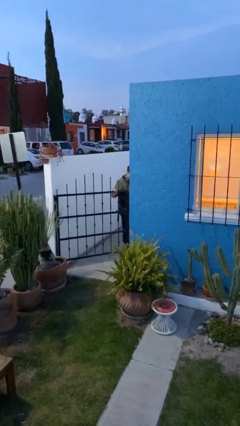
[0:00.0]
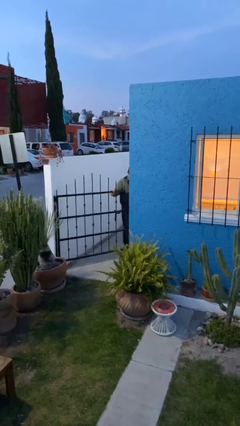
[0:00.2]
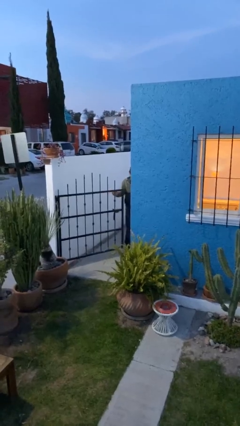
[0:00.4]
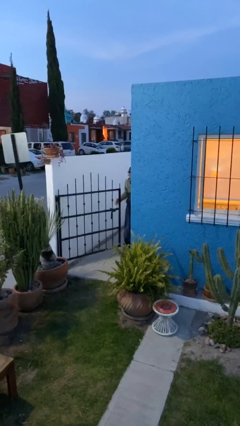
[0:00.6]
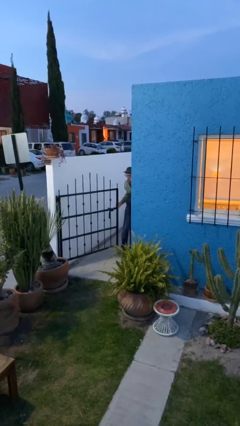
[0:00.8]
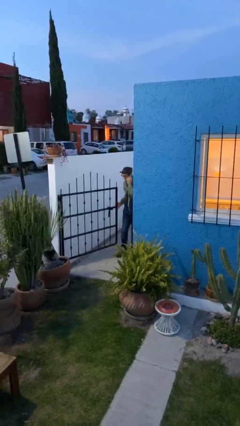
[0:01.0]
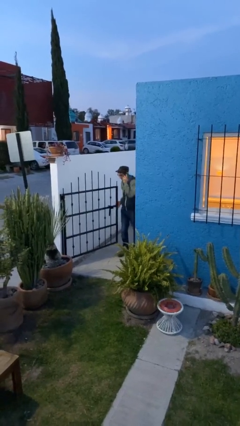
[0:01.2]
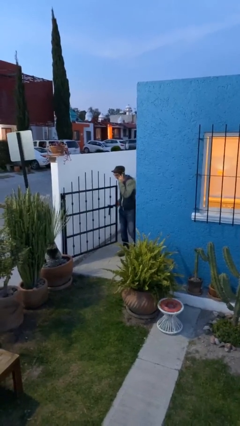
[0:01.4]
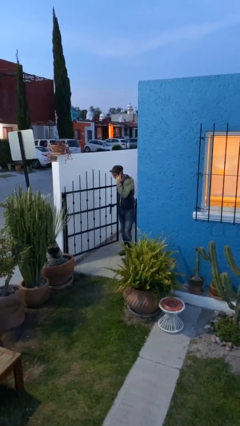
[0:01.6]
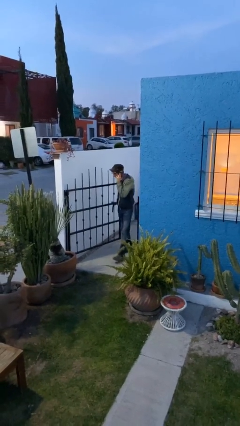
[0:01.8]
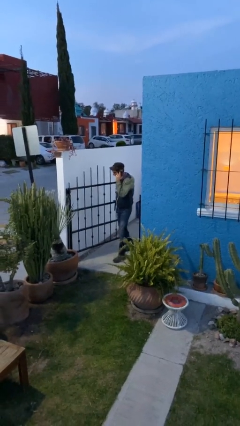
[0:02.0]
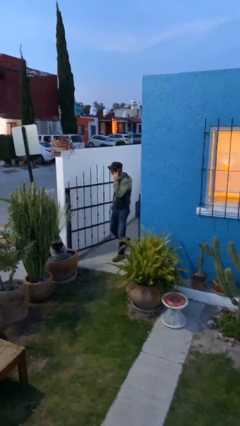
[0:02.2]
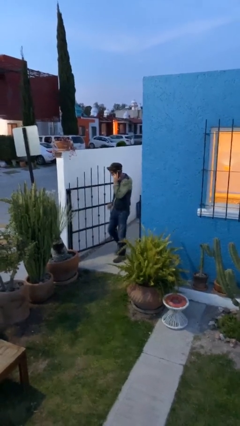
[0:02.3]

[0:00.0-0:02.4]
person enters scene through structure

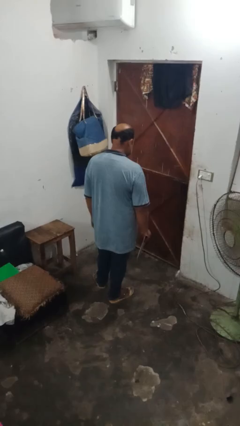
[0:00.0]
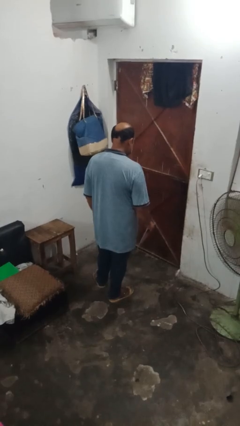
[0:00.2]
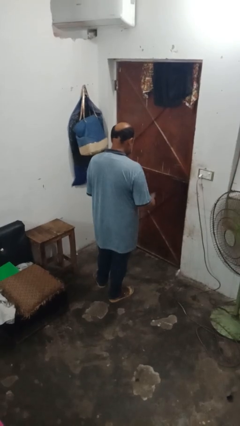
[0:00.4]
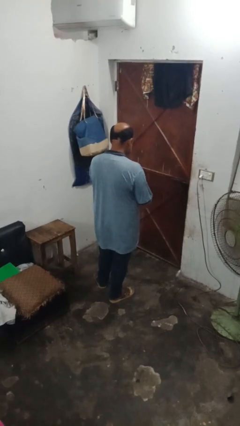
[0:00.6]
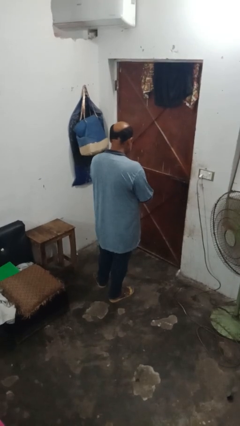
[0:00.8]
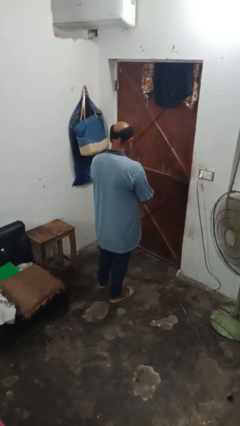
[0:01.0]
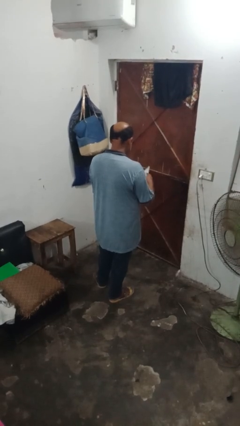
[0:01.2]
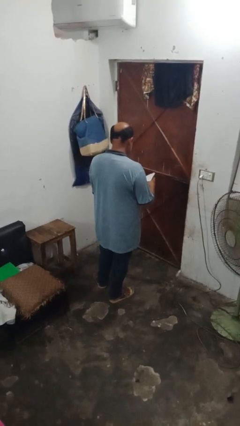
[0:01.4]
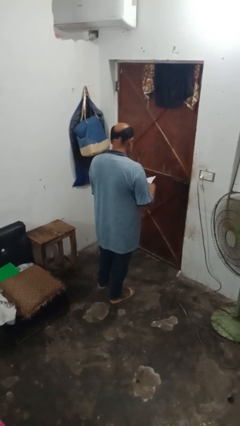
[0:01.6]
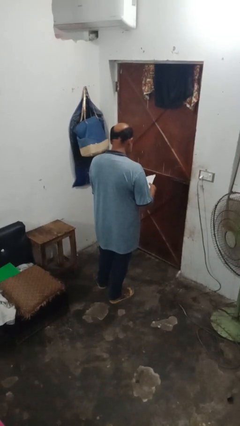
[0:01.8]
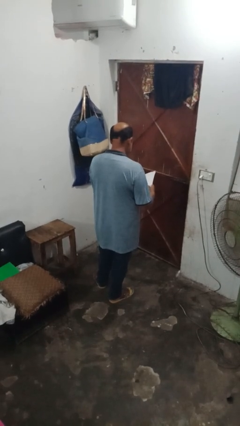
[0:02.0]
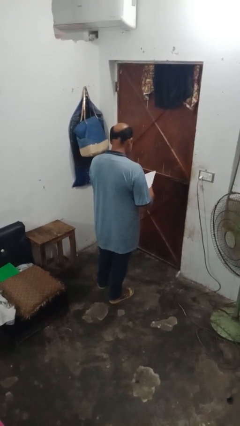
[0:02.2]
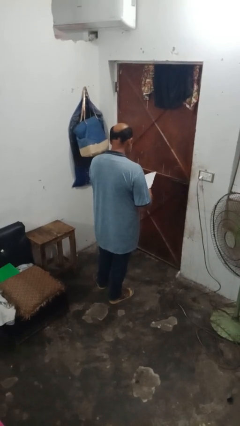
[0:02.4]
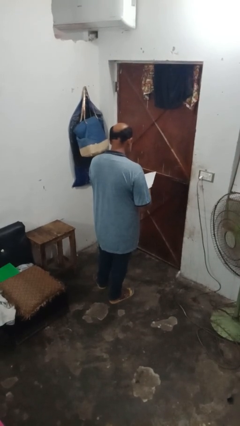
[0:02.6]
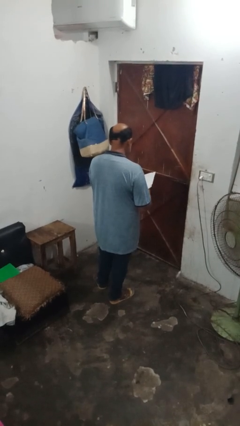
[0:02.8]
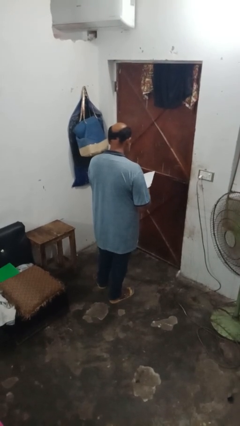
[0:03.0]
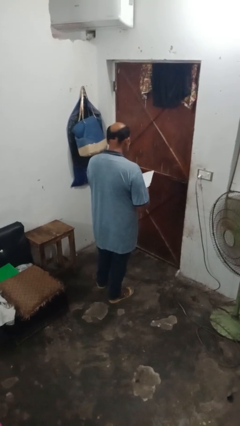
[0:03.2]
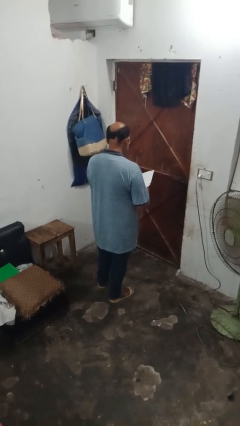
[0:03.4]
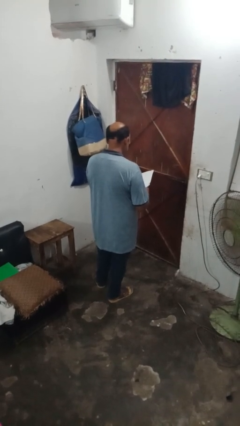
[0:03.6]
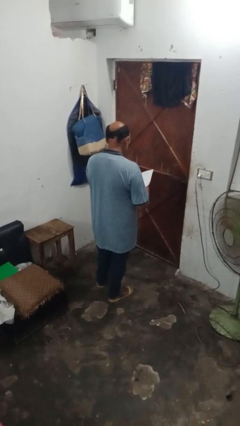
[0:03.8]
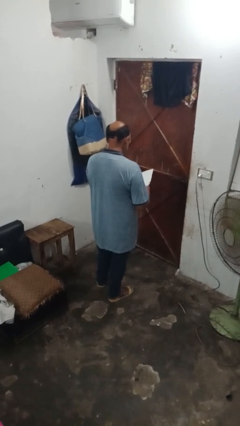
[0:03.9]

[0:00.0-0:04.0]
person reads magazine

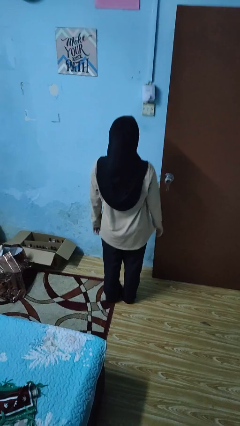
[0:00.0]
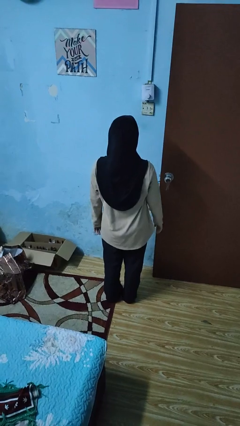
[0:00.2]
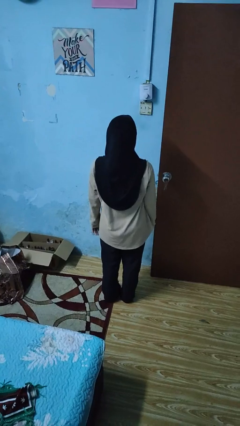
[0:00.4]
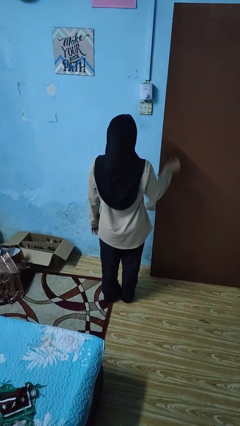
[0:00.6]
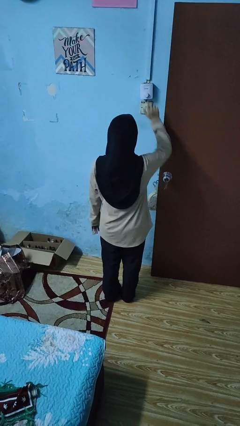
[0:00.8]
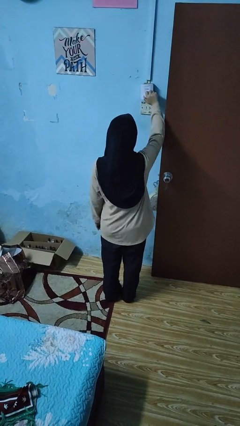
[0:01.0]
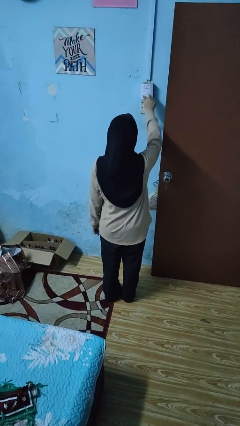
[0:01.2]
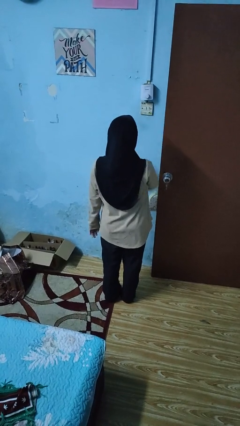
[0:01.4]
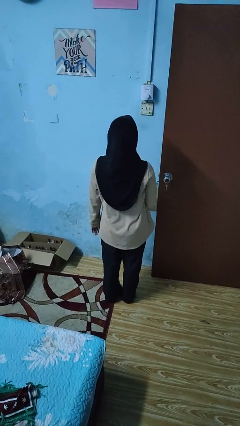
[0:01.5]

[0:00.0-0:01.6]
person adjusts thermostat

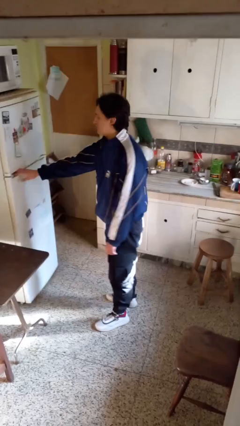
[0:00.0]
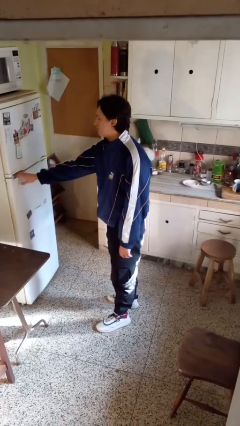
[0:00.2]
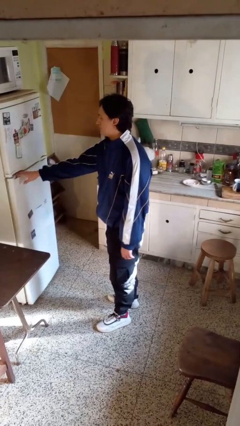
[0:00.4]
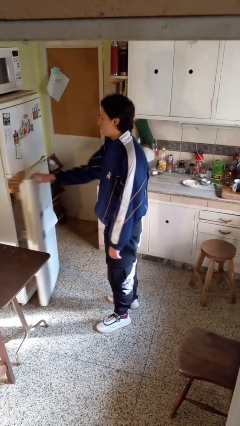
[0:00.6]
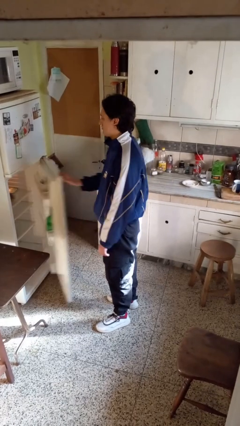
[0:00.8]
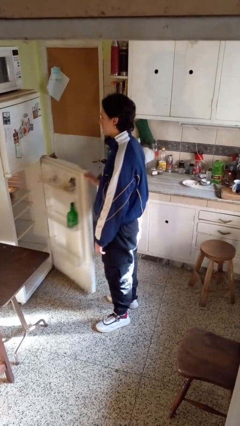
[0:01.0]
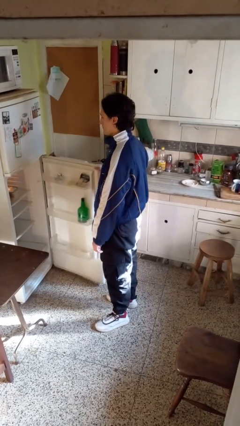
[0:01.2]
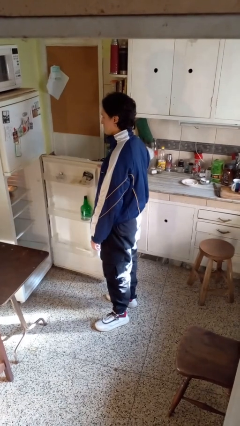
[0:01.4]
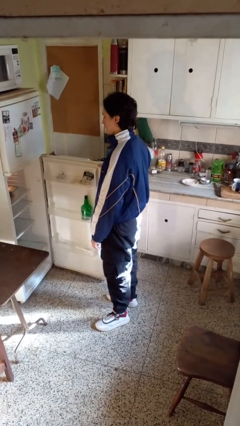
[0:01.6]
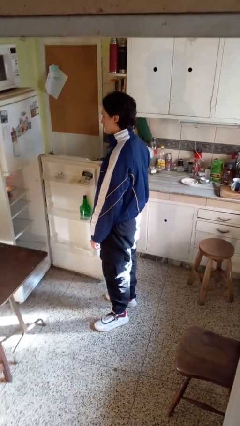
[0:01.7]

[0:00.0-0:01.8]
person opens refrigerator

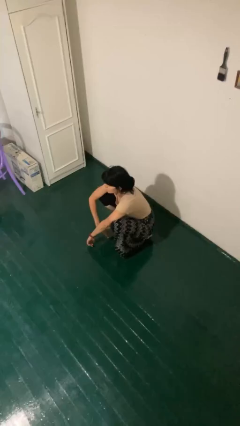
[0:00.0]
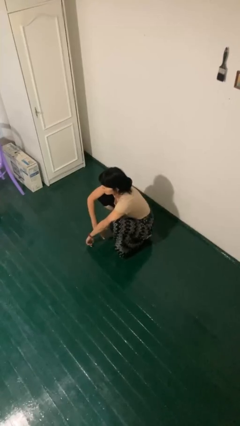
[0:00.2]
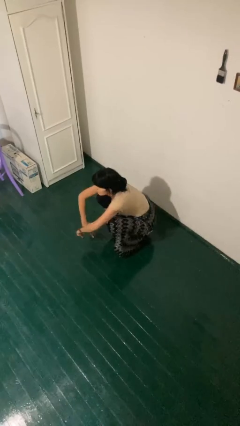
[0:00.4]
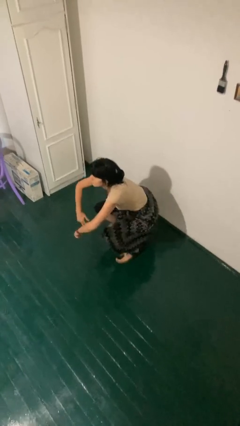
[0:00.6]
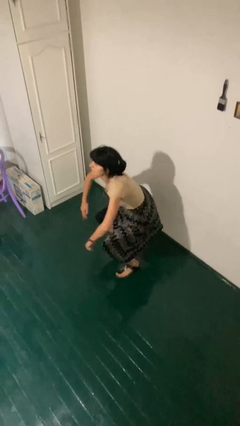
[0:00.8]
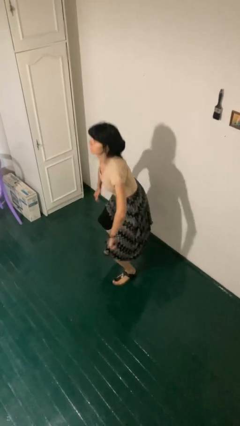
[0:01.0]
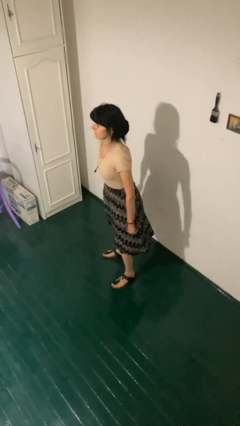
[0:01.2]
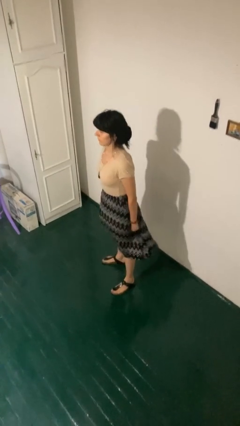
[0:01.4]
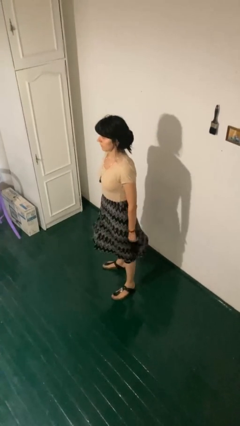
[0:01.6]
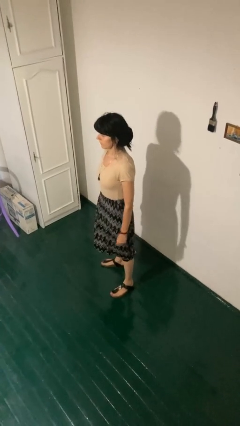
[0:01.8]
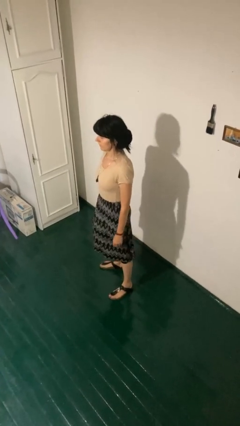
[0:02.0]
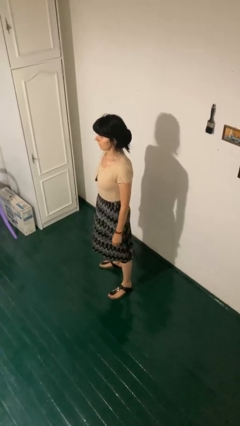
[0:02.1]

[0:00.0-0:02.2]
person stands up

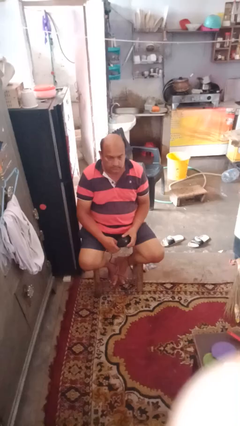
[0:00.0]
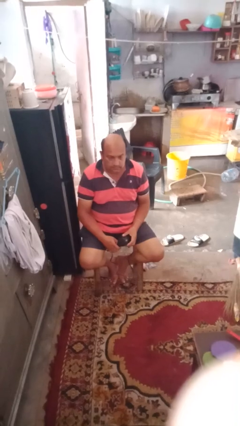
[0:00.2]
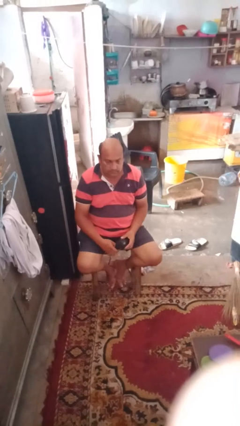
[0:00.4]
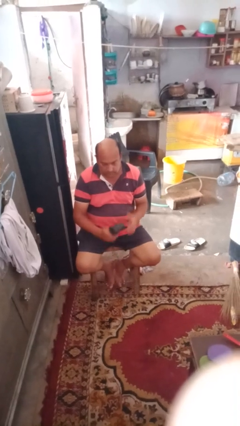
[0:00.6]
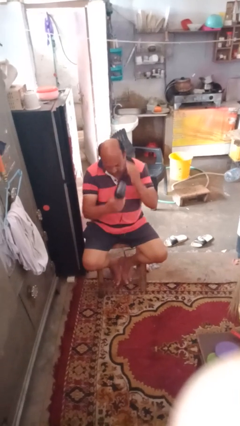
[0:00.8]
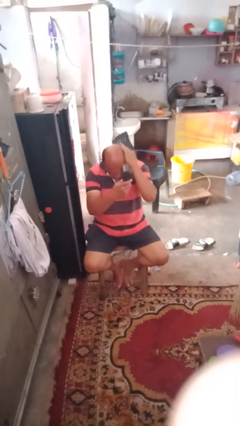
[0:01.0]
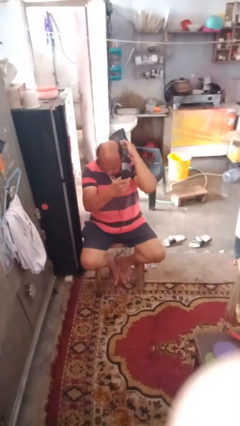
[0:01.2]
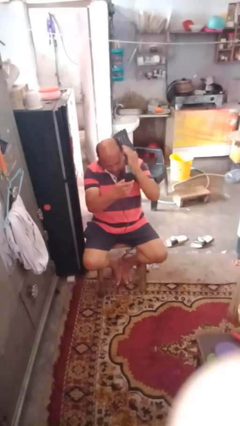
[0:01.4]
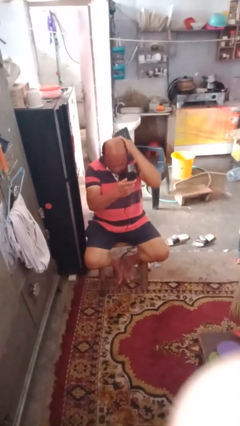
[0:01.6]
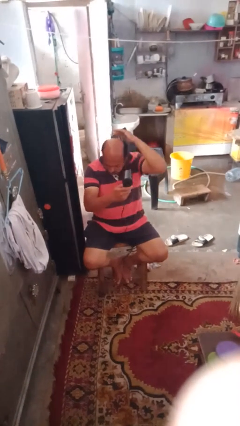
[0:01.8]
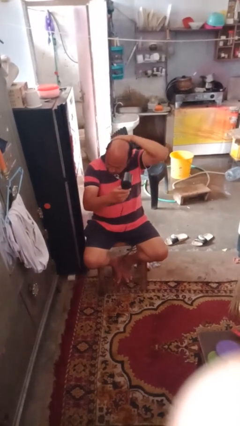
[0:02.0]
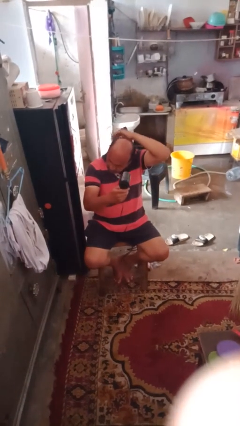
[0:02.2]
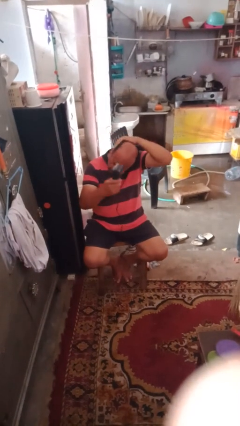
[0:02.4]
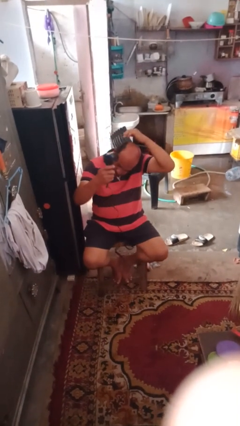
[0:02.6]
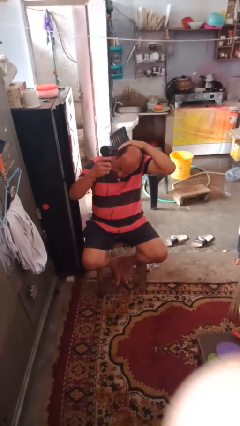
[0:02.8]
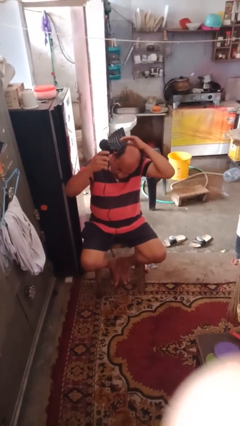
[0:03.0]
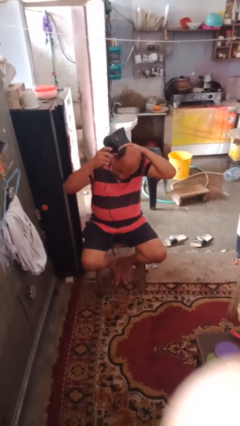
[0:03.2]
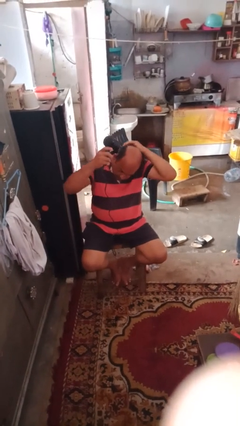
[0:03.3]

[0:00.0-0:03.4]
person dries hair with hairdryer

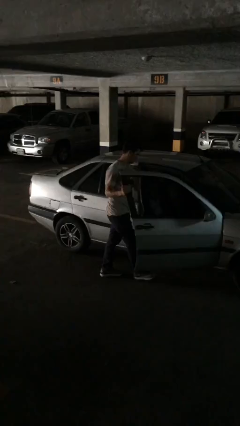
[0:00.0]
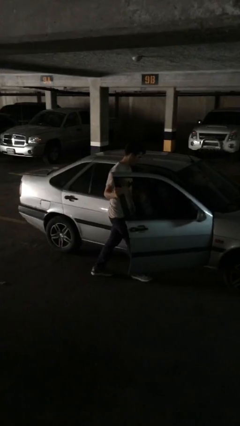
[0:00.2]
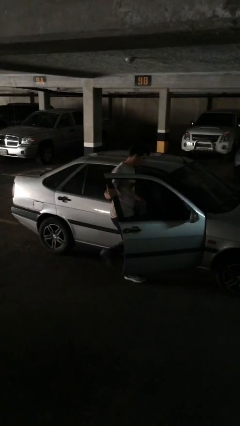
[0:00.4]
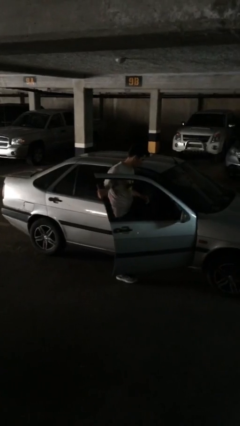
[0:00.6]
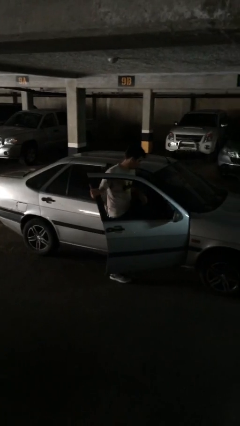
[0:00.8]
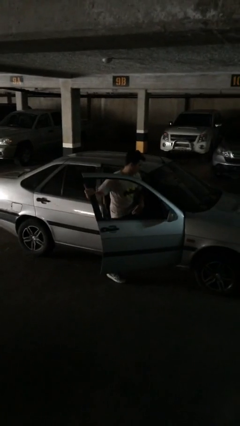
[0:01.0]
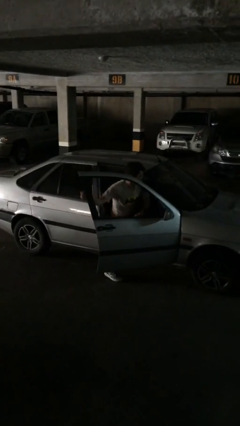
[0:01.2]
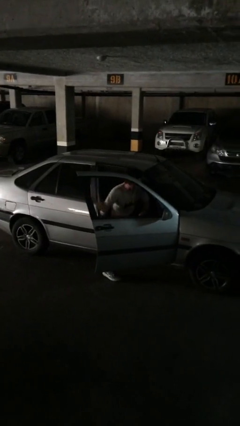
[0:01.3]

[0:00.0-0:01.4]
person enters car
